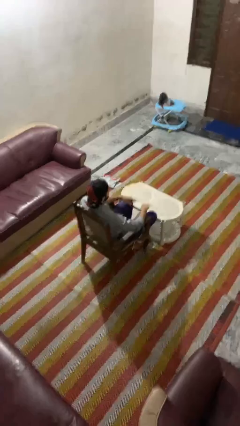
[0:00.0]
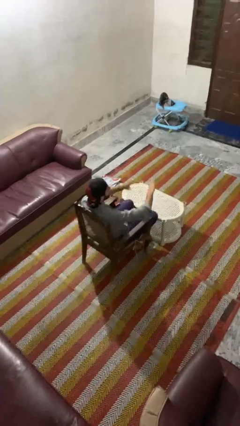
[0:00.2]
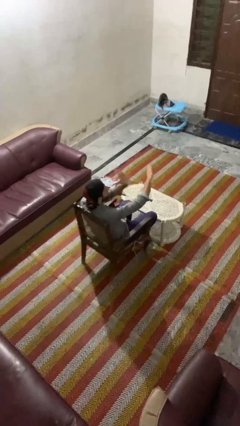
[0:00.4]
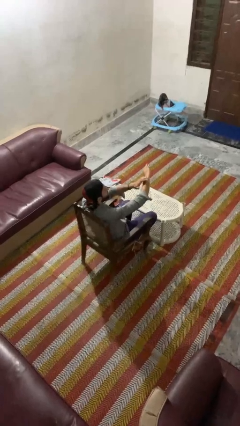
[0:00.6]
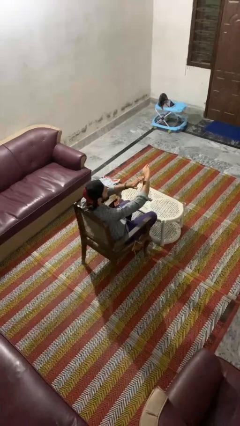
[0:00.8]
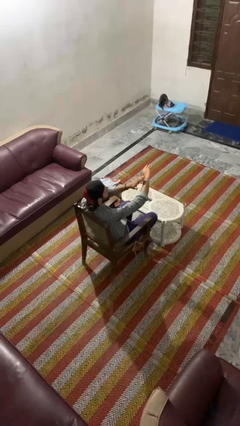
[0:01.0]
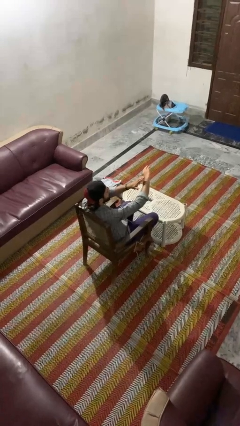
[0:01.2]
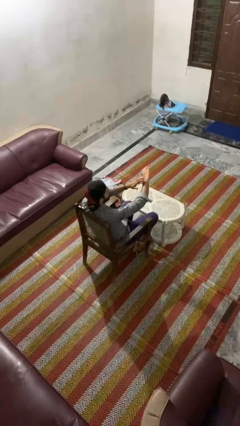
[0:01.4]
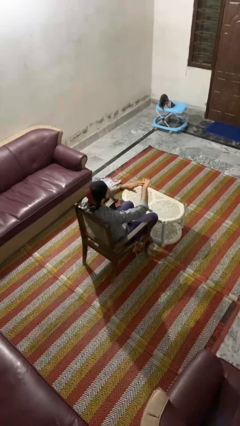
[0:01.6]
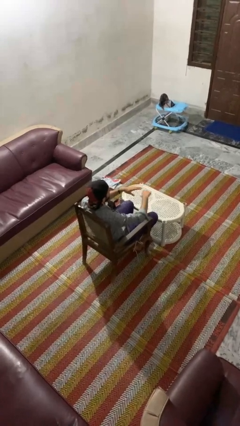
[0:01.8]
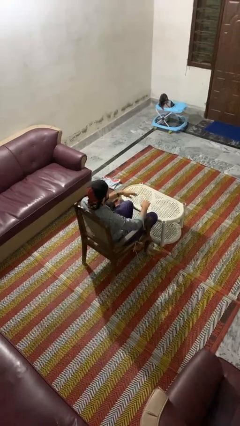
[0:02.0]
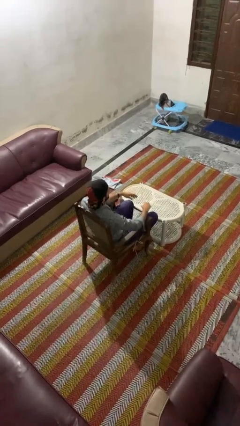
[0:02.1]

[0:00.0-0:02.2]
person swats bug

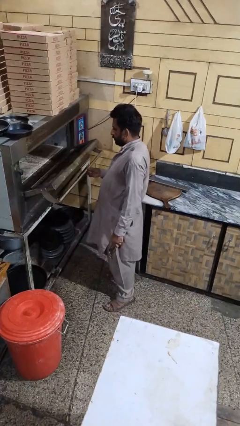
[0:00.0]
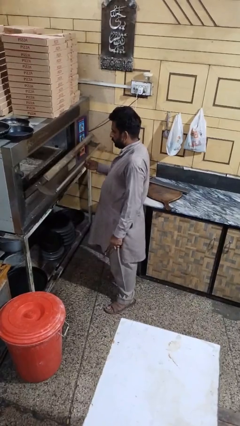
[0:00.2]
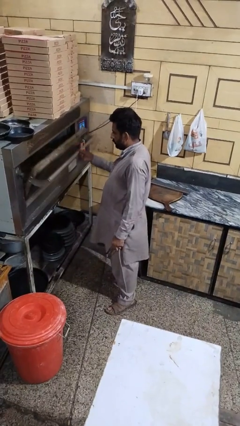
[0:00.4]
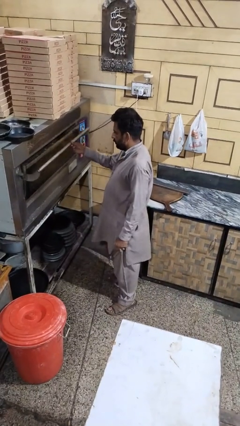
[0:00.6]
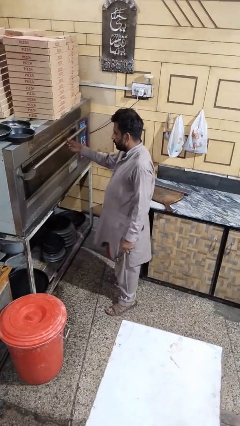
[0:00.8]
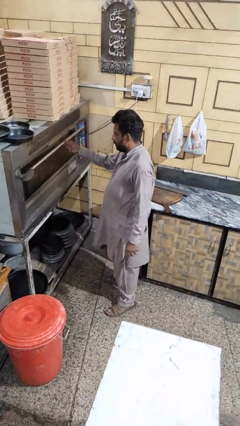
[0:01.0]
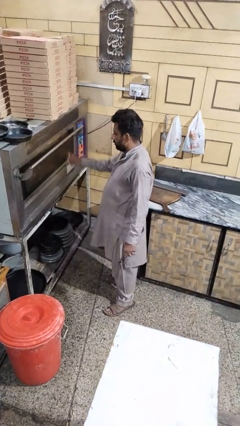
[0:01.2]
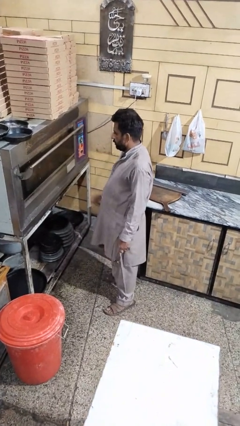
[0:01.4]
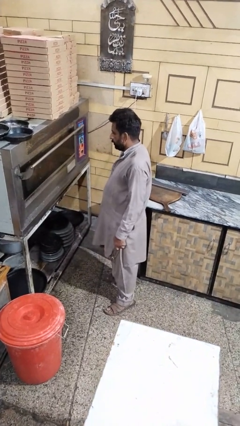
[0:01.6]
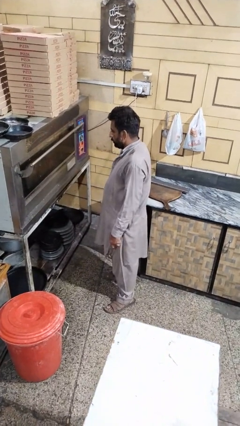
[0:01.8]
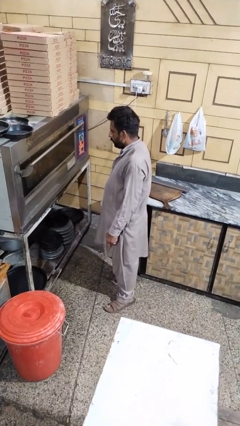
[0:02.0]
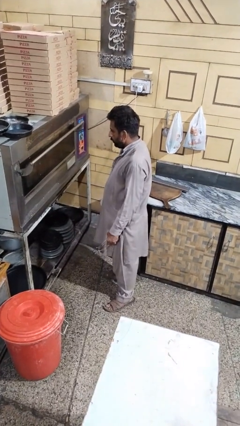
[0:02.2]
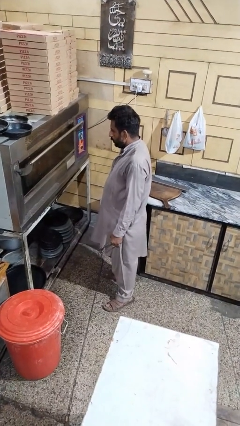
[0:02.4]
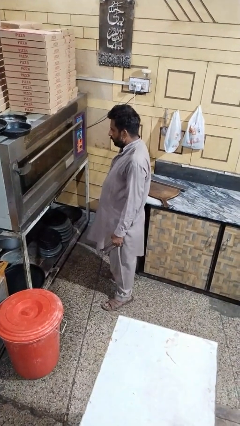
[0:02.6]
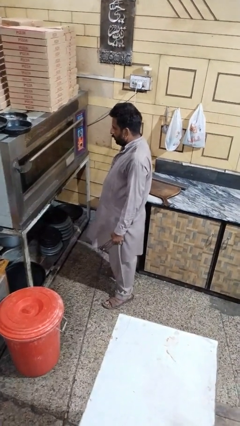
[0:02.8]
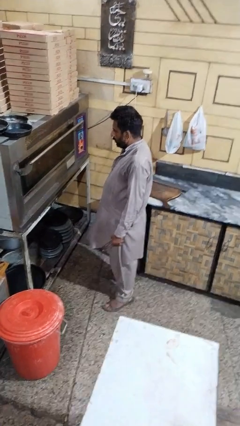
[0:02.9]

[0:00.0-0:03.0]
person closes microwave

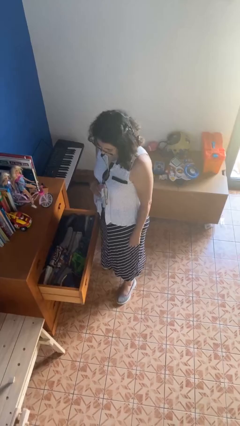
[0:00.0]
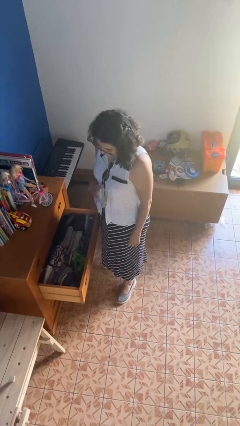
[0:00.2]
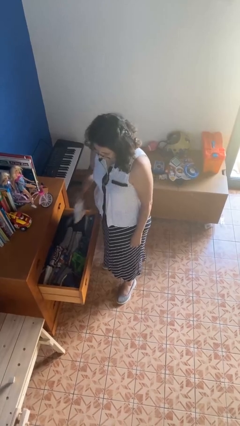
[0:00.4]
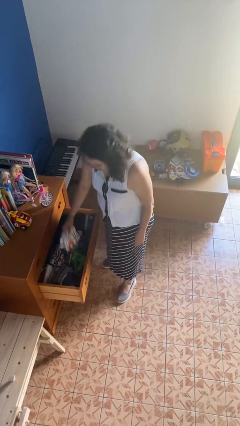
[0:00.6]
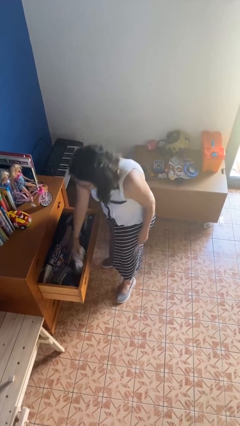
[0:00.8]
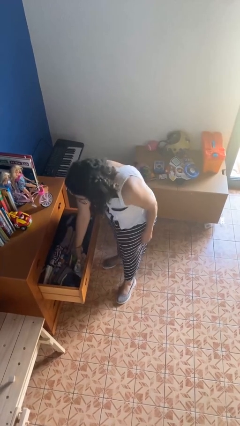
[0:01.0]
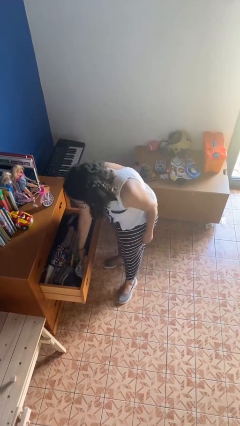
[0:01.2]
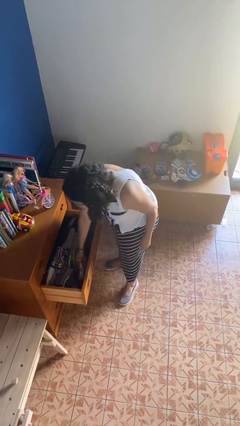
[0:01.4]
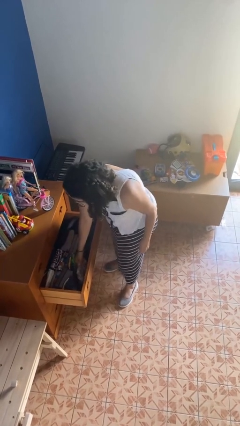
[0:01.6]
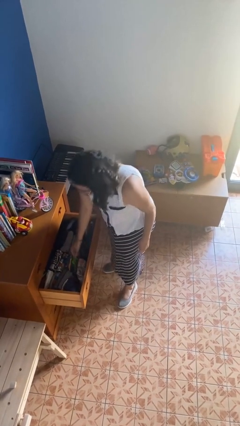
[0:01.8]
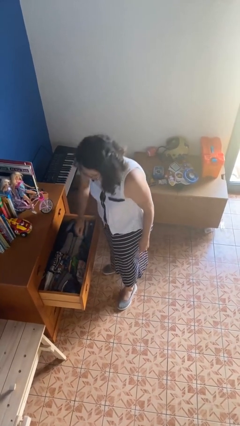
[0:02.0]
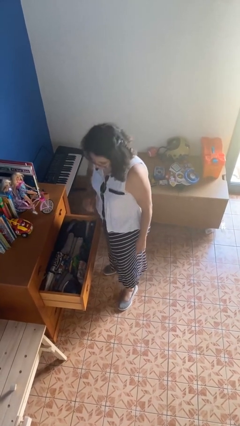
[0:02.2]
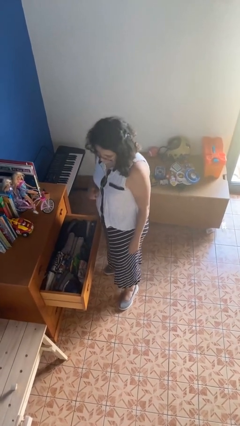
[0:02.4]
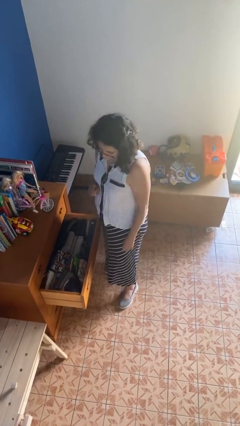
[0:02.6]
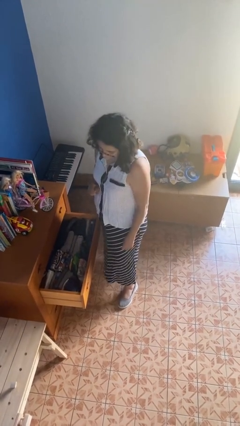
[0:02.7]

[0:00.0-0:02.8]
person puts clothes into dresser

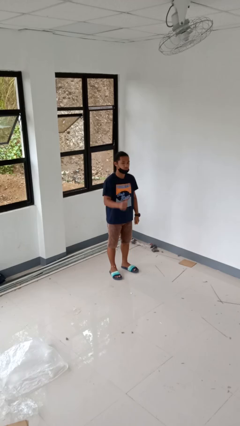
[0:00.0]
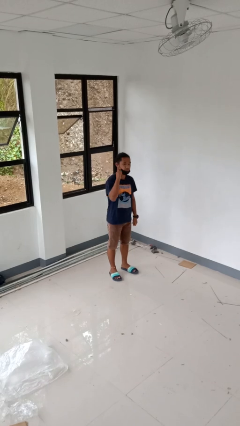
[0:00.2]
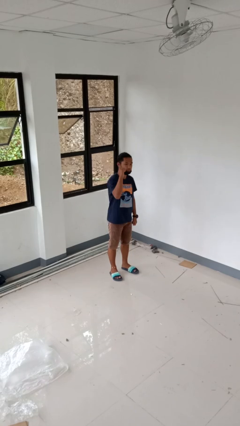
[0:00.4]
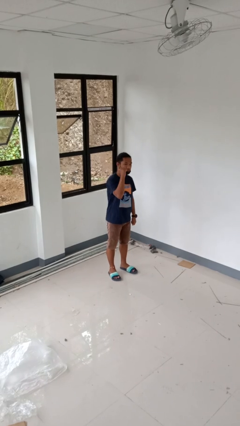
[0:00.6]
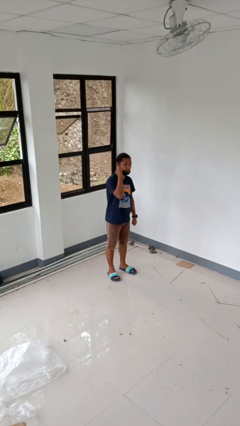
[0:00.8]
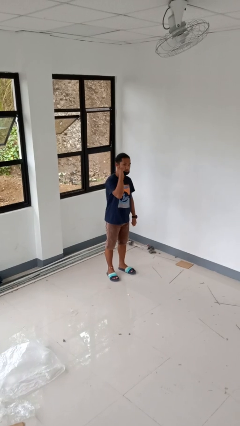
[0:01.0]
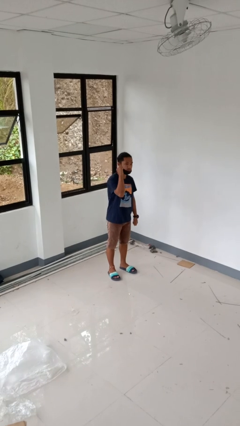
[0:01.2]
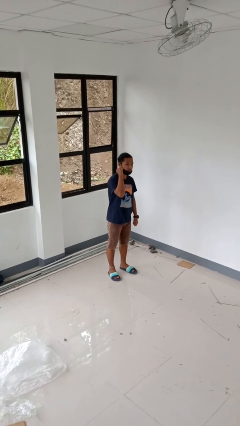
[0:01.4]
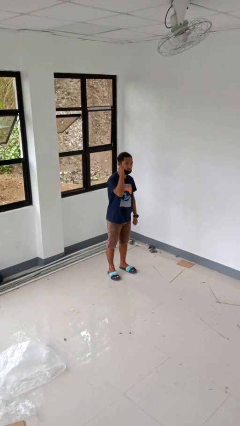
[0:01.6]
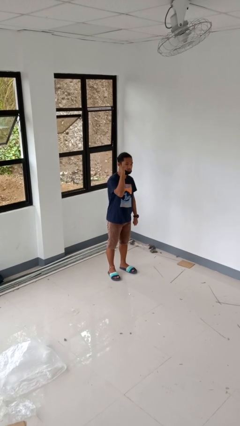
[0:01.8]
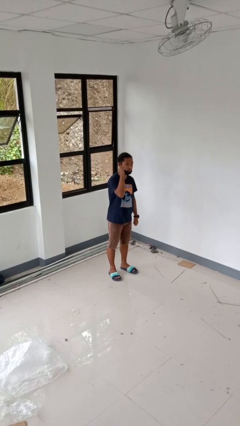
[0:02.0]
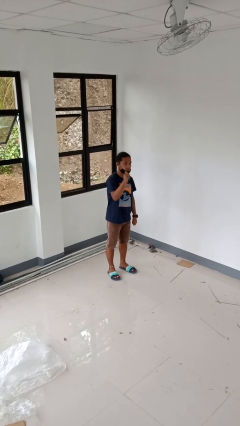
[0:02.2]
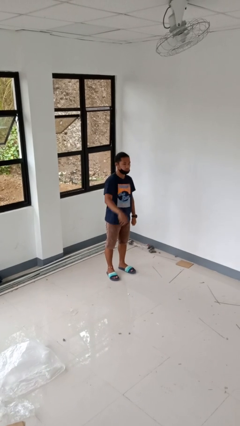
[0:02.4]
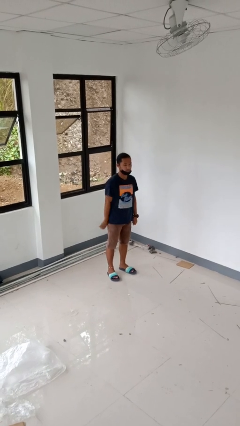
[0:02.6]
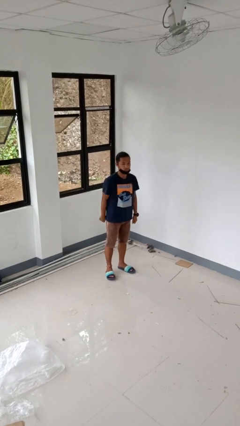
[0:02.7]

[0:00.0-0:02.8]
person gestures behind me

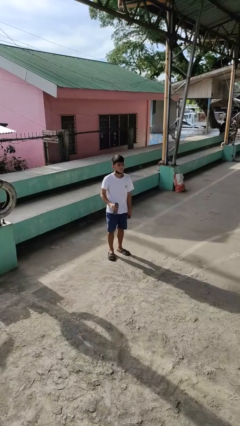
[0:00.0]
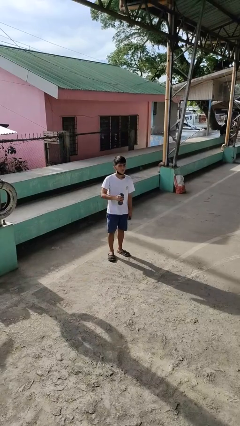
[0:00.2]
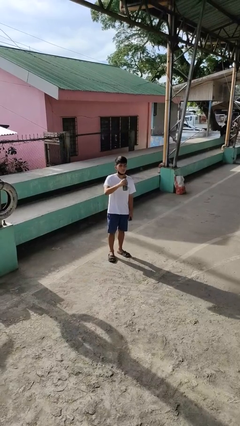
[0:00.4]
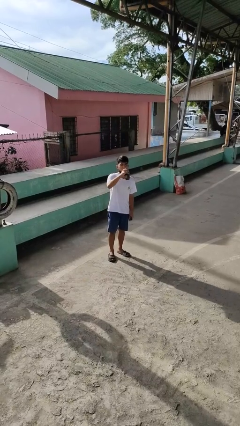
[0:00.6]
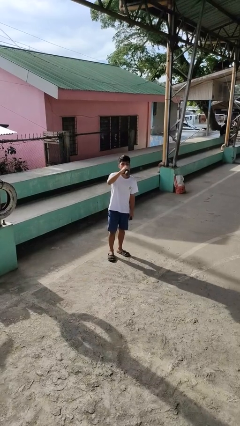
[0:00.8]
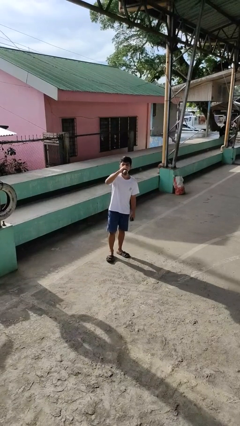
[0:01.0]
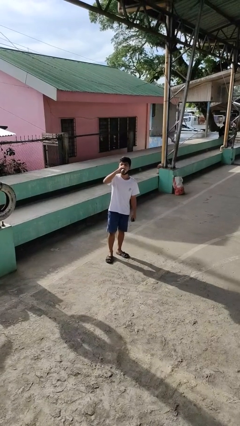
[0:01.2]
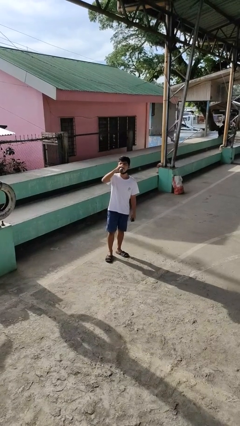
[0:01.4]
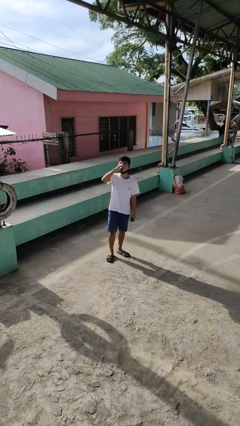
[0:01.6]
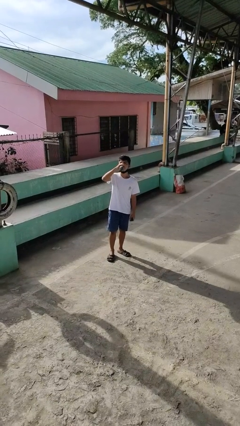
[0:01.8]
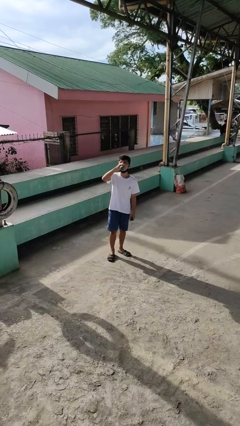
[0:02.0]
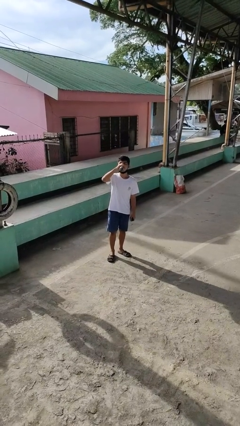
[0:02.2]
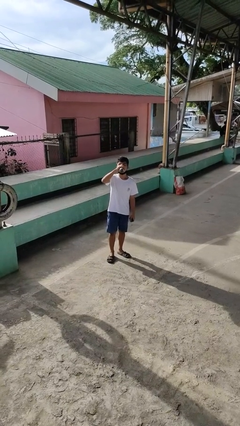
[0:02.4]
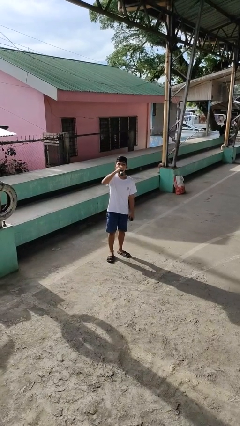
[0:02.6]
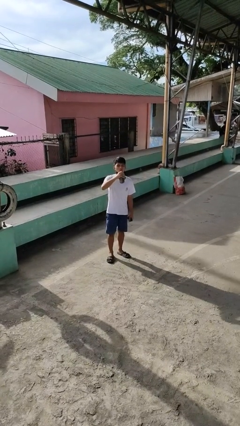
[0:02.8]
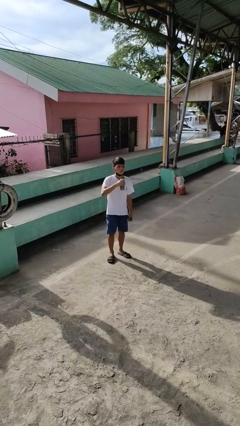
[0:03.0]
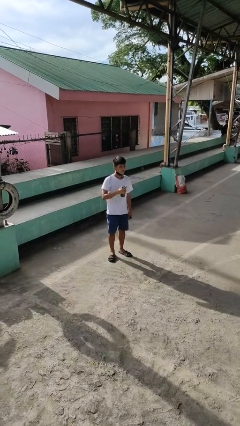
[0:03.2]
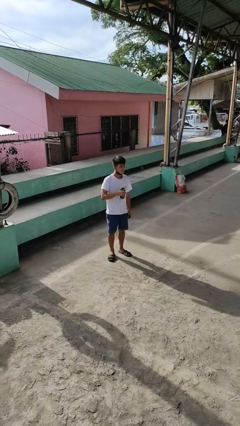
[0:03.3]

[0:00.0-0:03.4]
person drinks from bottle

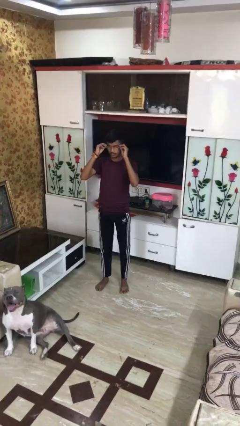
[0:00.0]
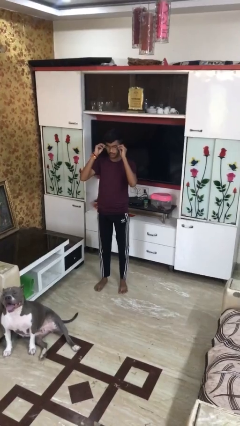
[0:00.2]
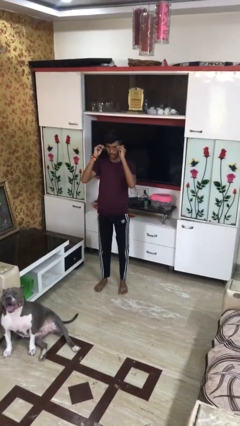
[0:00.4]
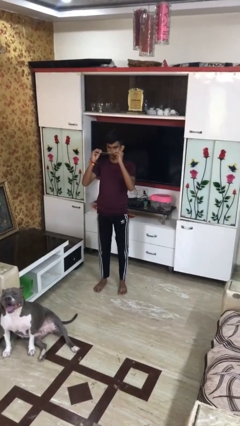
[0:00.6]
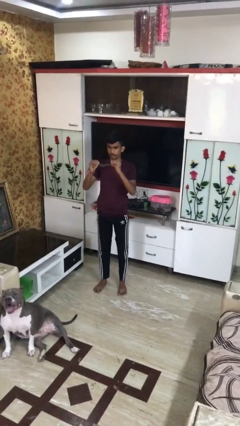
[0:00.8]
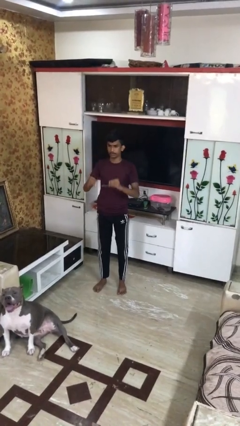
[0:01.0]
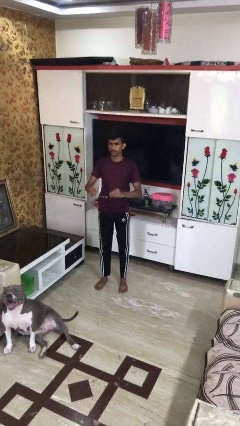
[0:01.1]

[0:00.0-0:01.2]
person takes off glasses

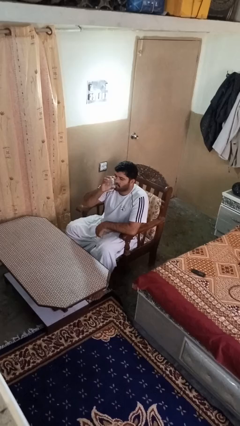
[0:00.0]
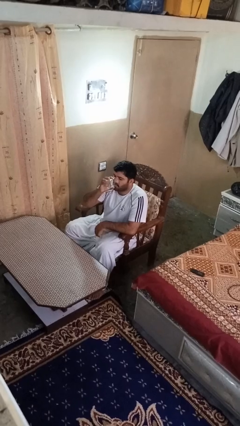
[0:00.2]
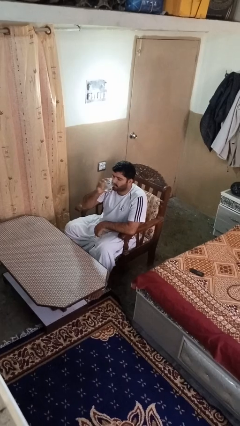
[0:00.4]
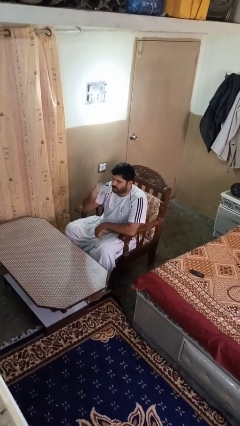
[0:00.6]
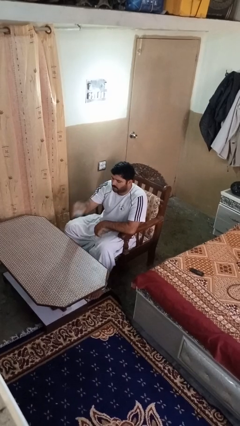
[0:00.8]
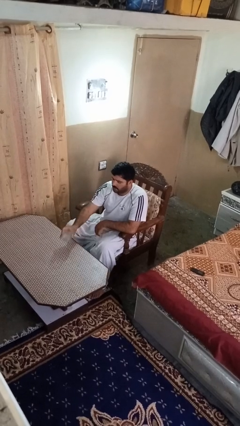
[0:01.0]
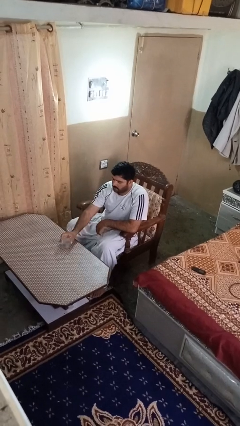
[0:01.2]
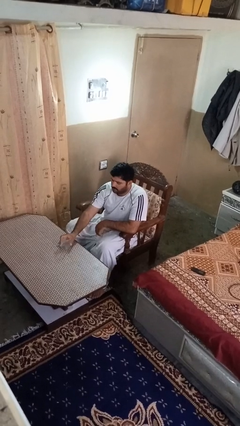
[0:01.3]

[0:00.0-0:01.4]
person puts down object on table
